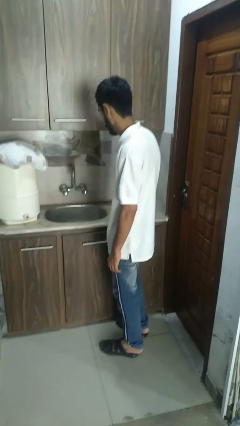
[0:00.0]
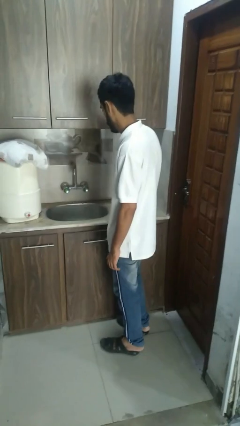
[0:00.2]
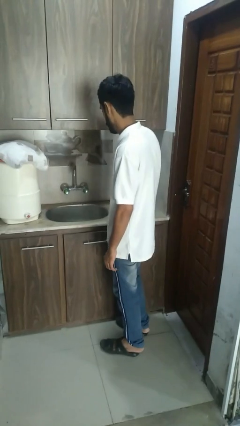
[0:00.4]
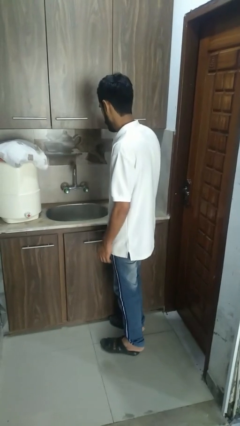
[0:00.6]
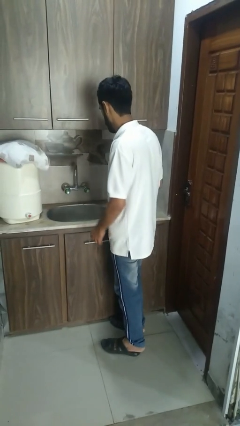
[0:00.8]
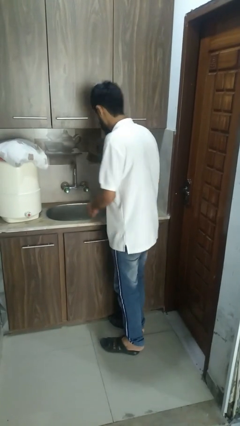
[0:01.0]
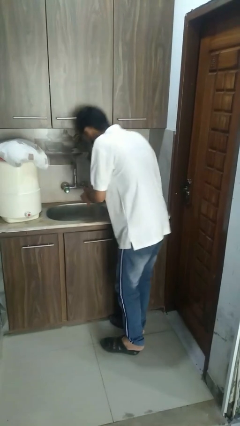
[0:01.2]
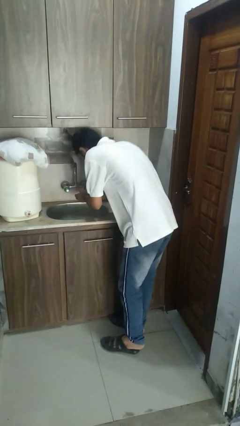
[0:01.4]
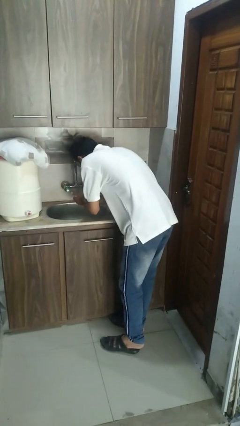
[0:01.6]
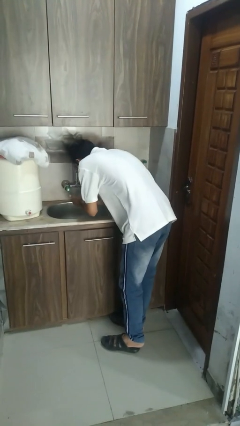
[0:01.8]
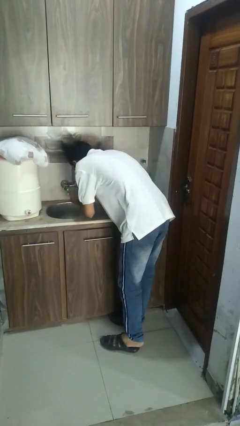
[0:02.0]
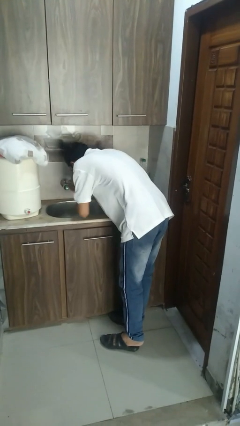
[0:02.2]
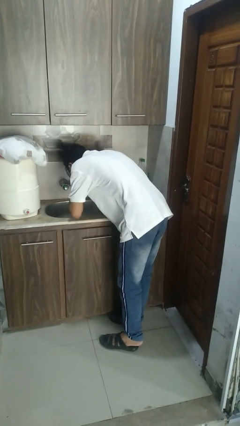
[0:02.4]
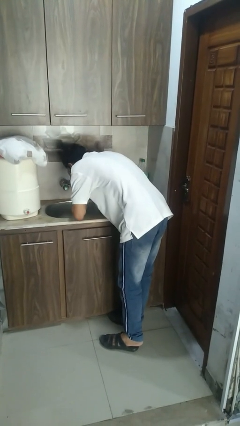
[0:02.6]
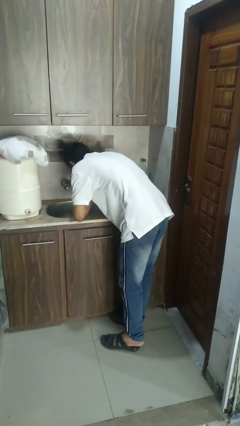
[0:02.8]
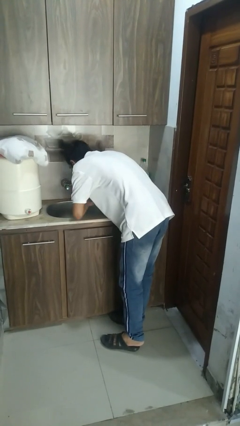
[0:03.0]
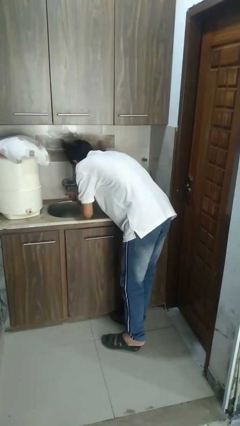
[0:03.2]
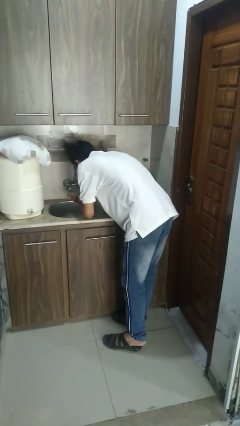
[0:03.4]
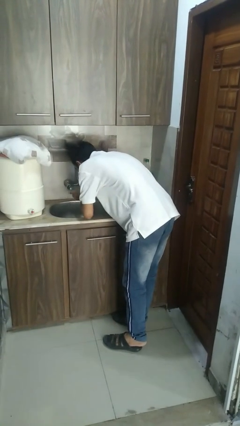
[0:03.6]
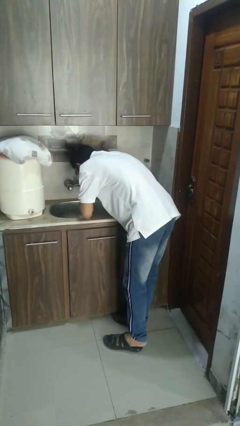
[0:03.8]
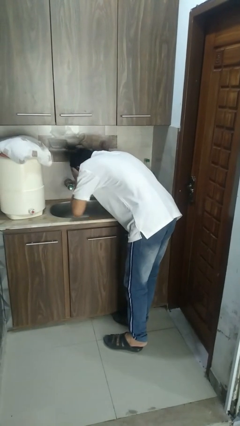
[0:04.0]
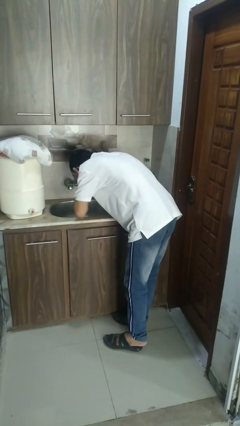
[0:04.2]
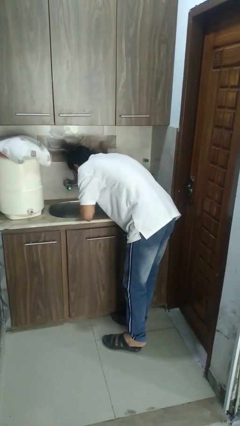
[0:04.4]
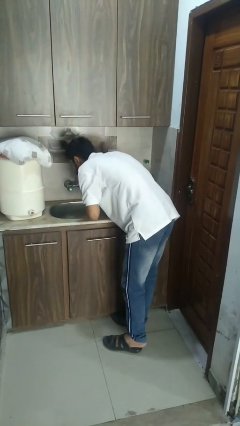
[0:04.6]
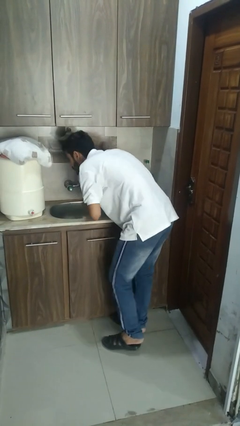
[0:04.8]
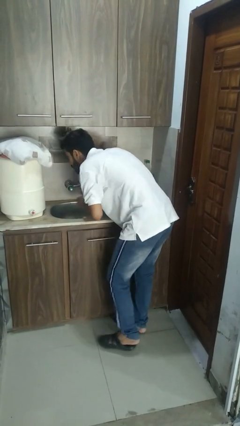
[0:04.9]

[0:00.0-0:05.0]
person washes face

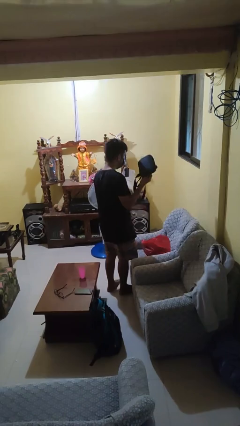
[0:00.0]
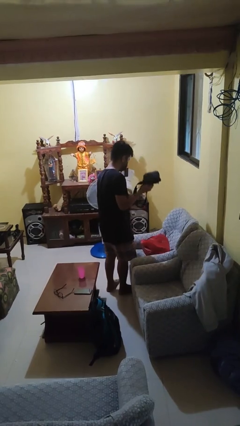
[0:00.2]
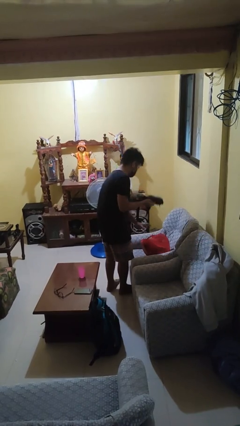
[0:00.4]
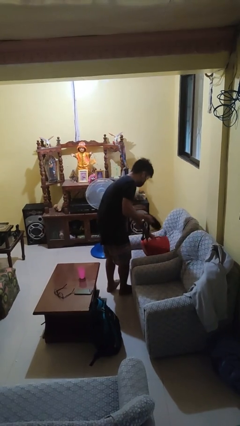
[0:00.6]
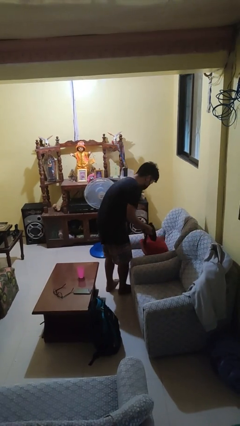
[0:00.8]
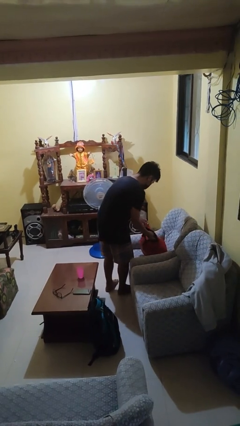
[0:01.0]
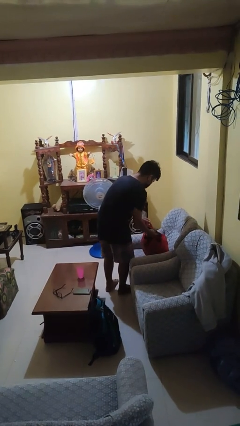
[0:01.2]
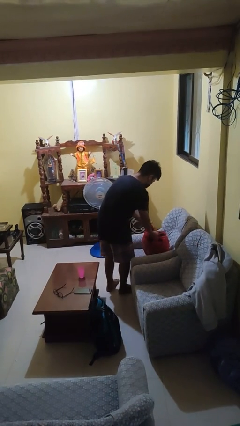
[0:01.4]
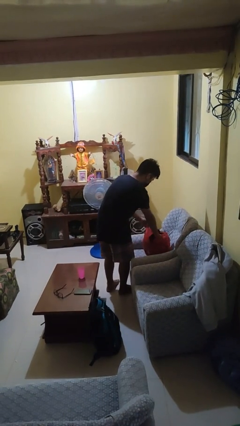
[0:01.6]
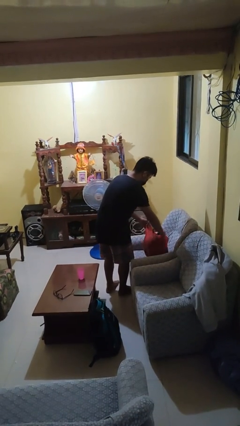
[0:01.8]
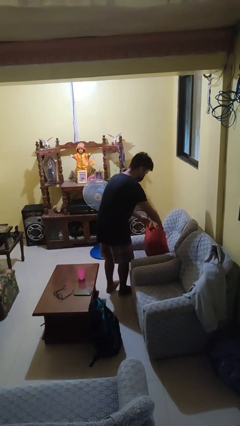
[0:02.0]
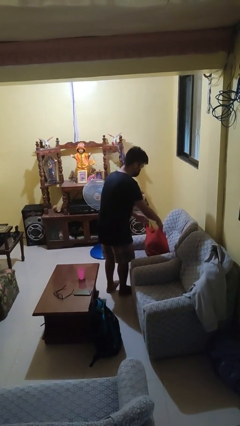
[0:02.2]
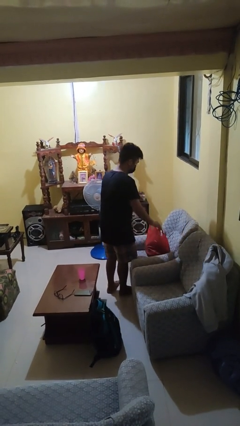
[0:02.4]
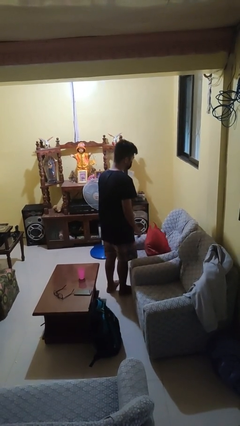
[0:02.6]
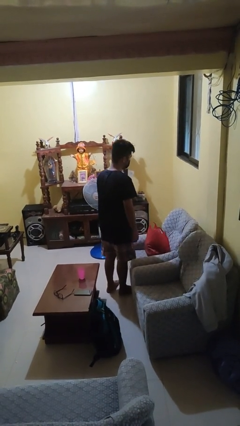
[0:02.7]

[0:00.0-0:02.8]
person puts object into bag

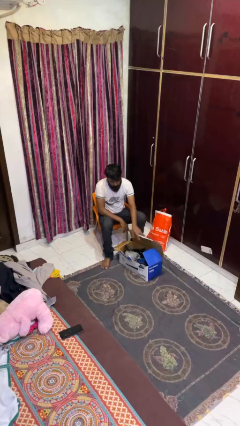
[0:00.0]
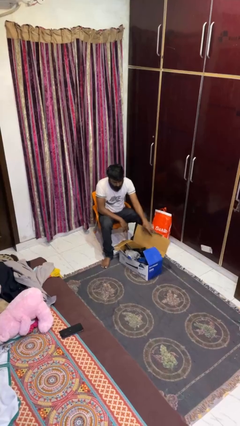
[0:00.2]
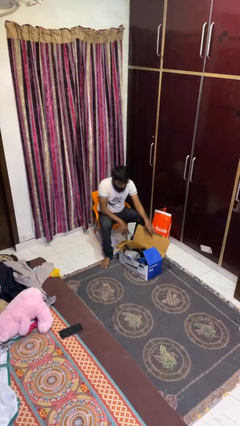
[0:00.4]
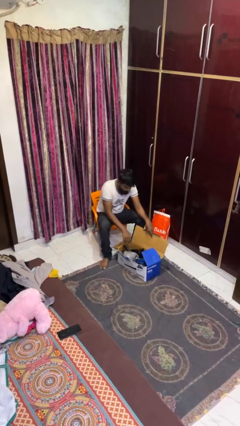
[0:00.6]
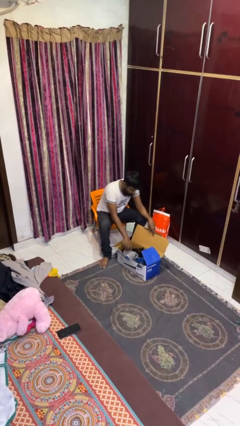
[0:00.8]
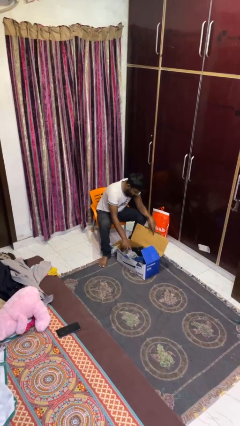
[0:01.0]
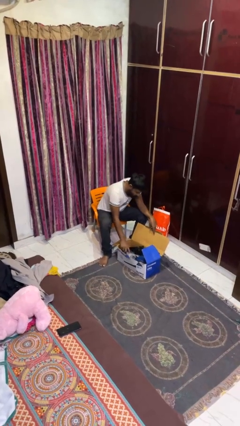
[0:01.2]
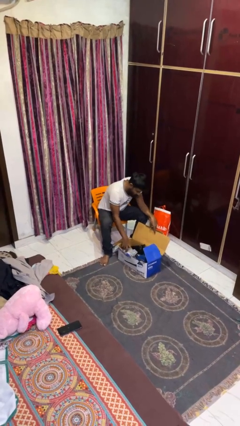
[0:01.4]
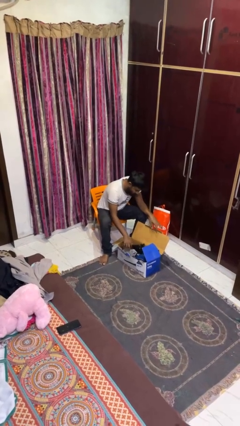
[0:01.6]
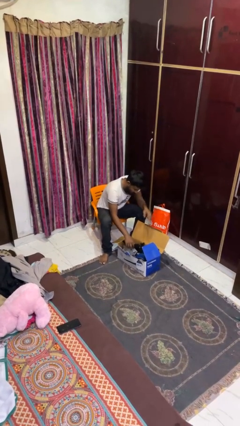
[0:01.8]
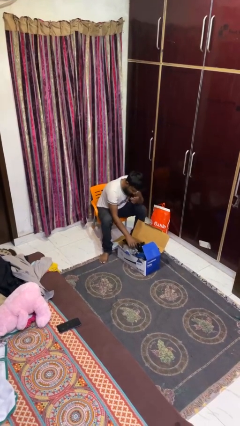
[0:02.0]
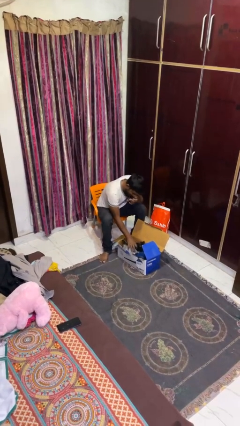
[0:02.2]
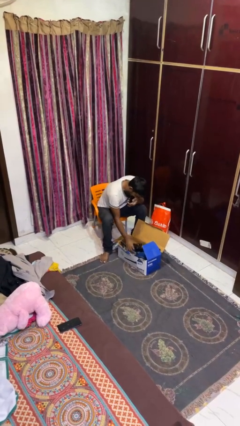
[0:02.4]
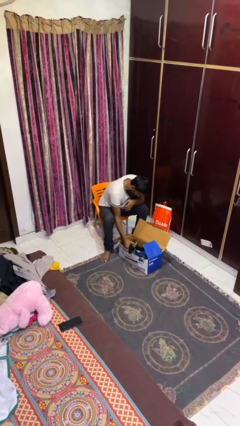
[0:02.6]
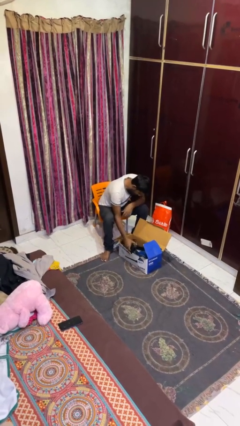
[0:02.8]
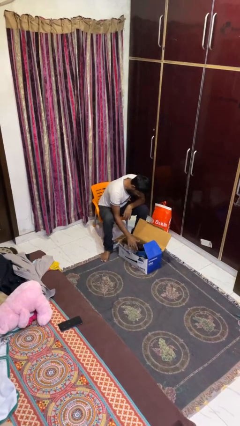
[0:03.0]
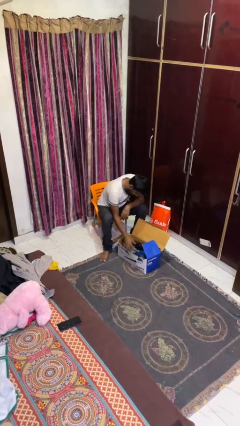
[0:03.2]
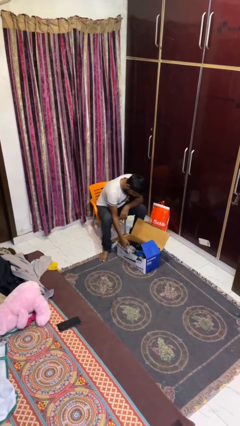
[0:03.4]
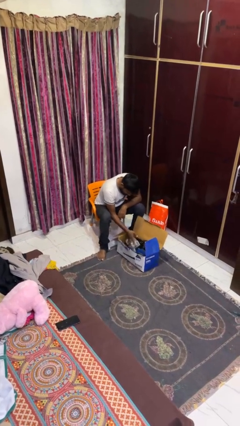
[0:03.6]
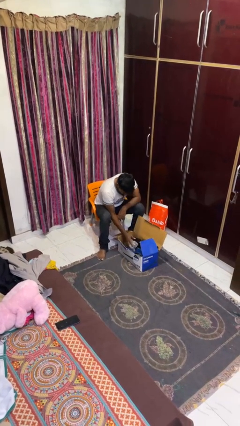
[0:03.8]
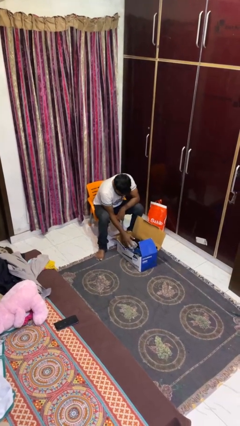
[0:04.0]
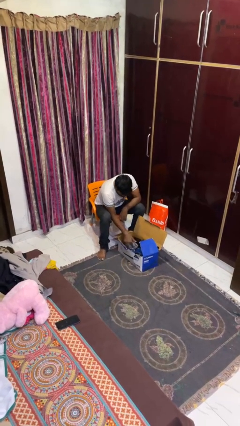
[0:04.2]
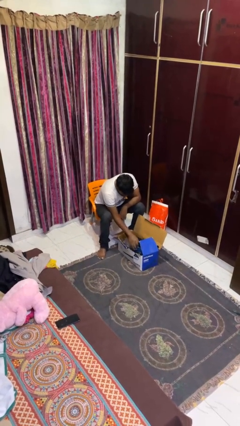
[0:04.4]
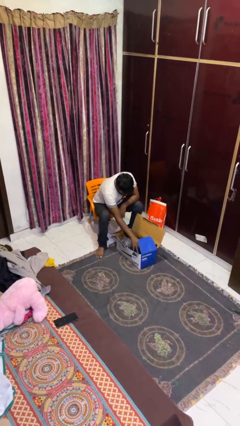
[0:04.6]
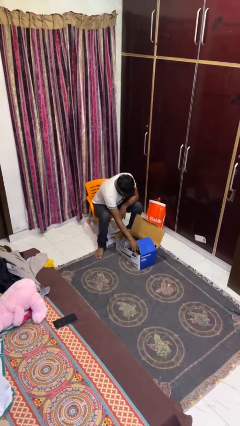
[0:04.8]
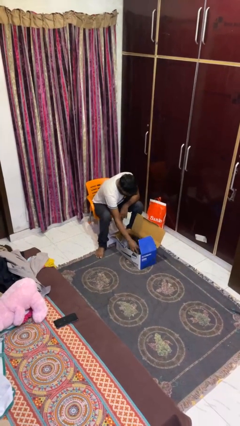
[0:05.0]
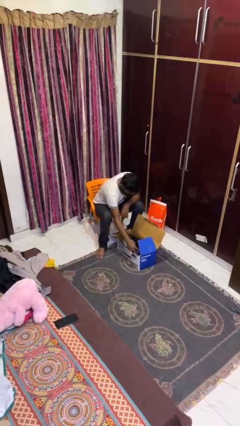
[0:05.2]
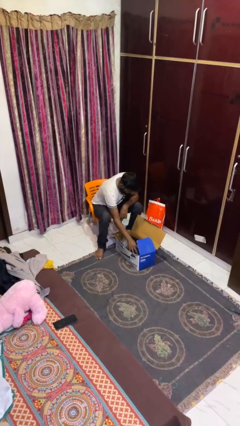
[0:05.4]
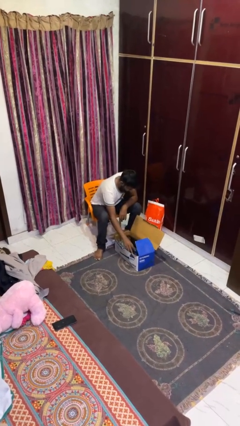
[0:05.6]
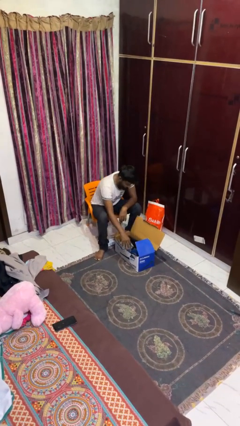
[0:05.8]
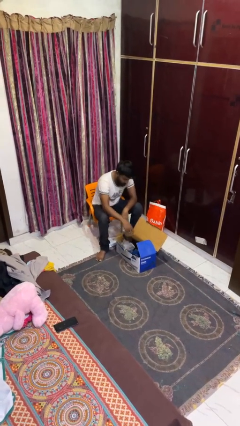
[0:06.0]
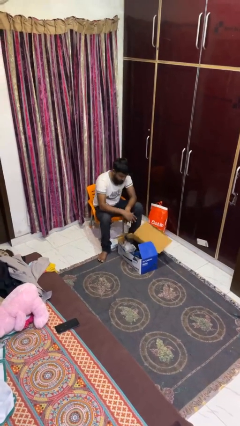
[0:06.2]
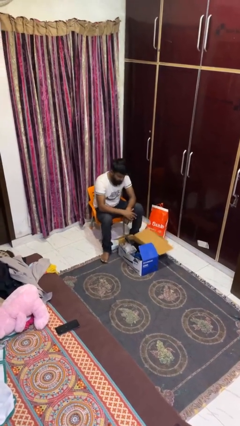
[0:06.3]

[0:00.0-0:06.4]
person searches in box

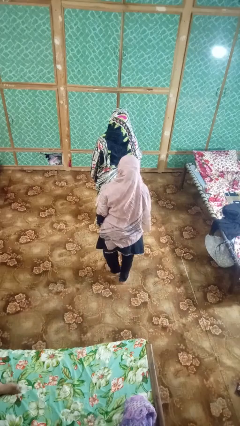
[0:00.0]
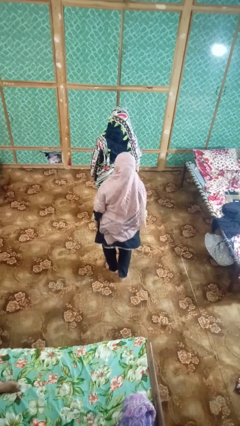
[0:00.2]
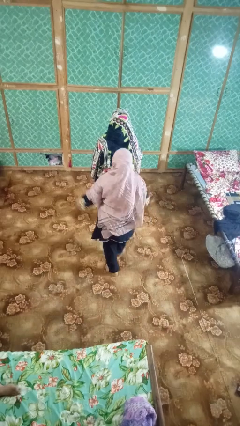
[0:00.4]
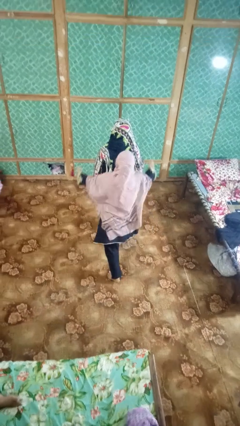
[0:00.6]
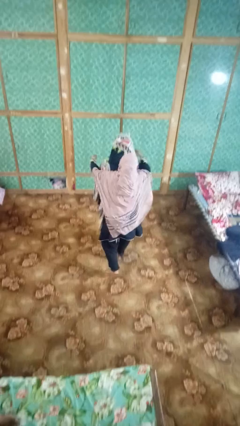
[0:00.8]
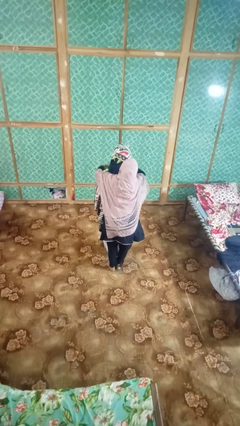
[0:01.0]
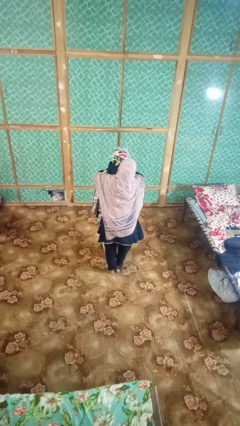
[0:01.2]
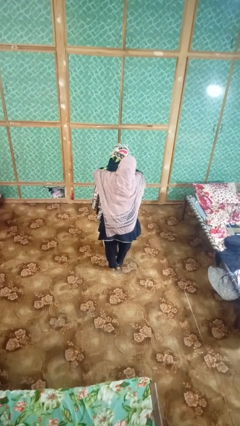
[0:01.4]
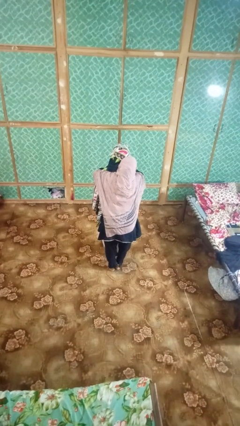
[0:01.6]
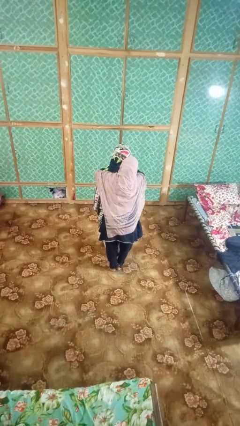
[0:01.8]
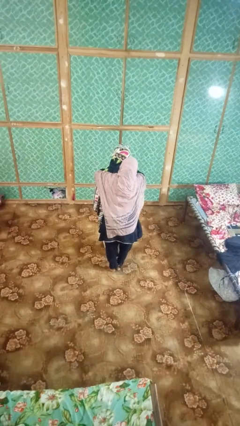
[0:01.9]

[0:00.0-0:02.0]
person hugs person from behind

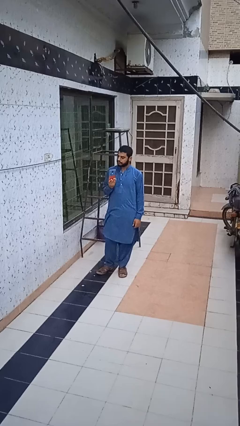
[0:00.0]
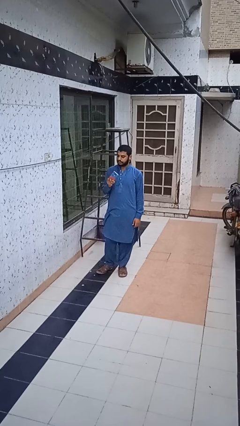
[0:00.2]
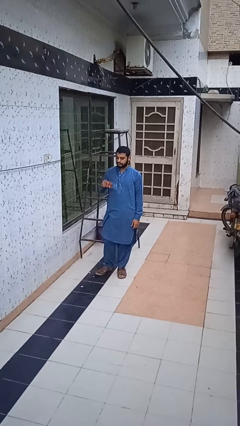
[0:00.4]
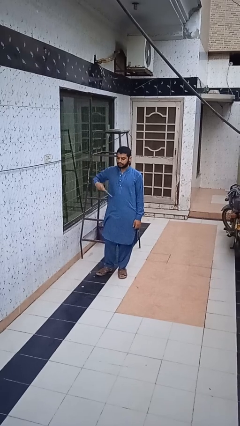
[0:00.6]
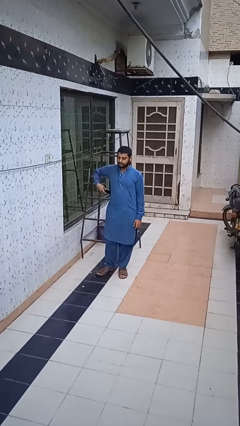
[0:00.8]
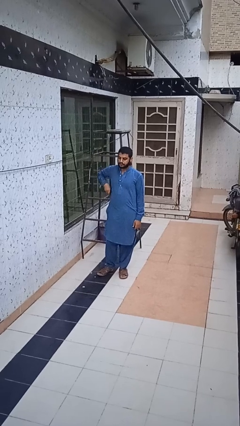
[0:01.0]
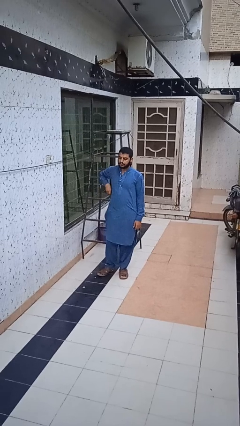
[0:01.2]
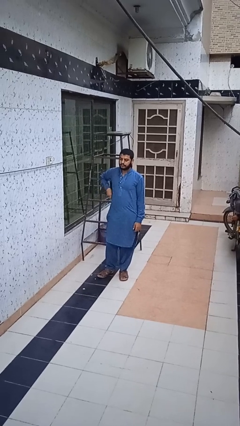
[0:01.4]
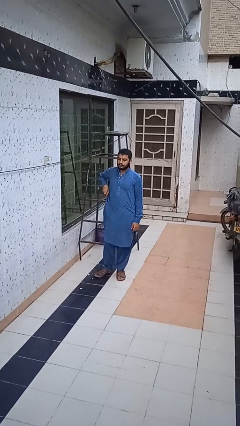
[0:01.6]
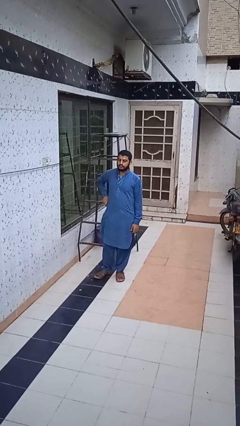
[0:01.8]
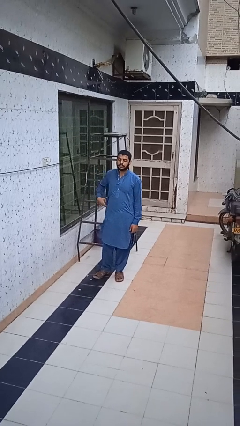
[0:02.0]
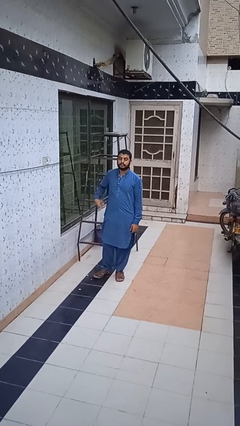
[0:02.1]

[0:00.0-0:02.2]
person puts phone into pocket
